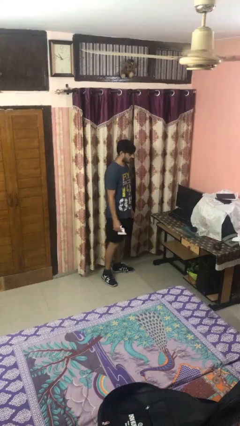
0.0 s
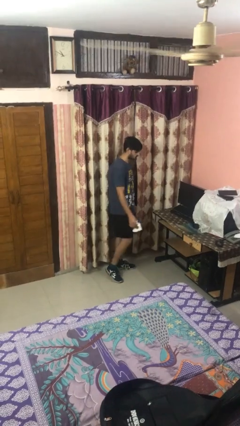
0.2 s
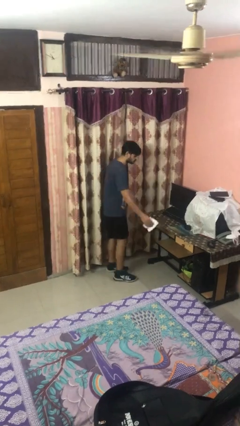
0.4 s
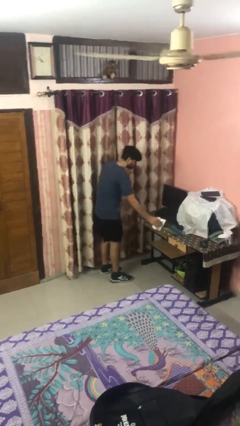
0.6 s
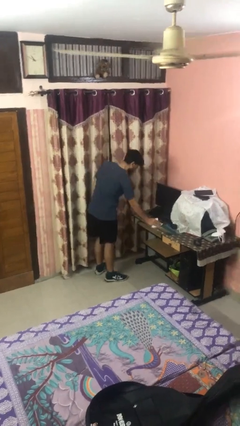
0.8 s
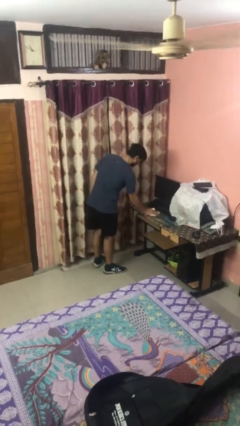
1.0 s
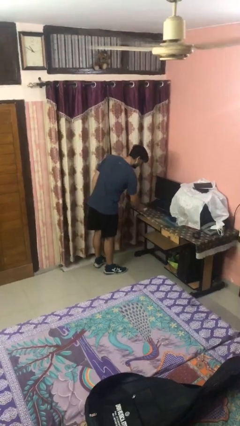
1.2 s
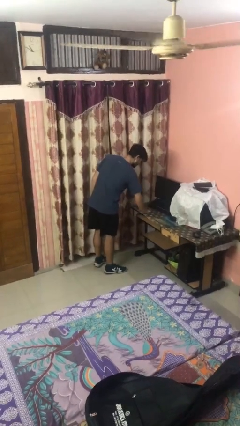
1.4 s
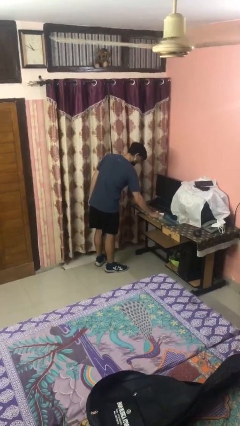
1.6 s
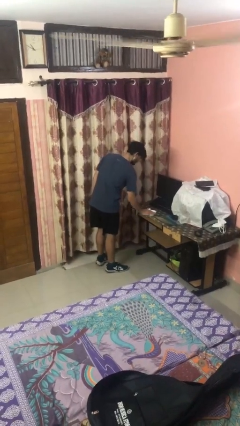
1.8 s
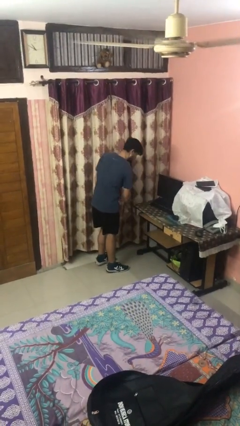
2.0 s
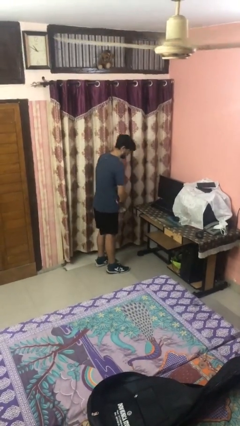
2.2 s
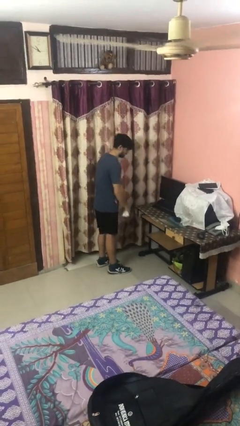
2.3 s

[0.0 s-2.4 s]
person cleans table with rag

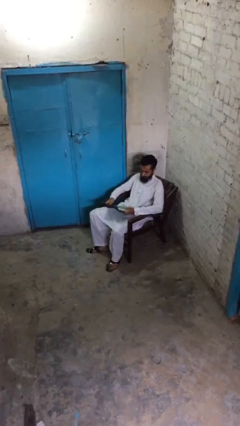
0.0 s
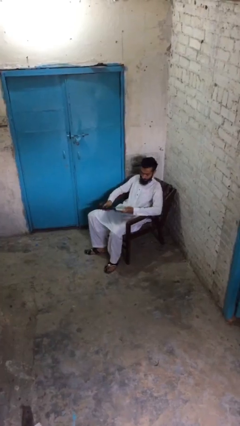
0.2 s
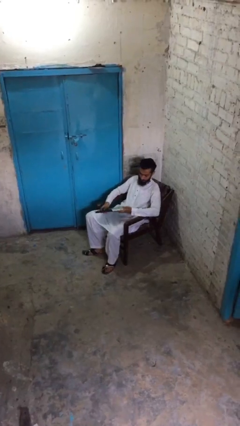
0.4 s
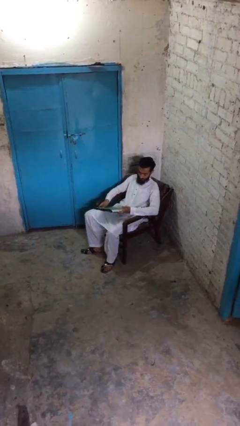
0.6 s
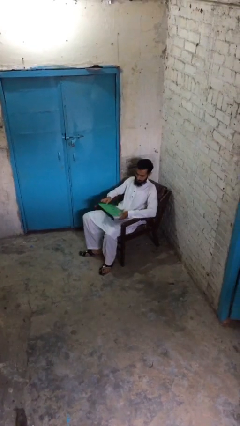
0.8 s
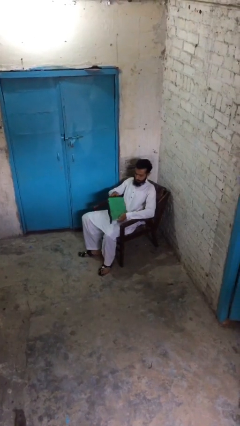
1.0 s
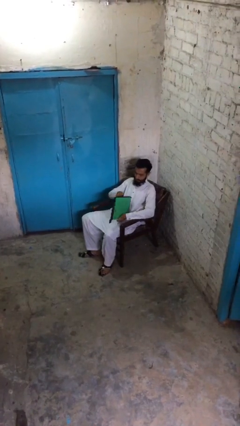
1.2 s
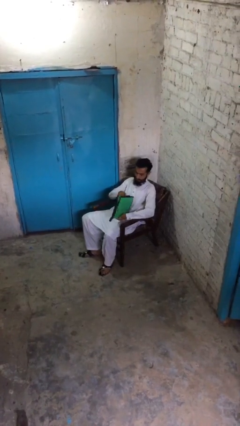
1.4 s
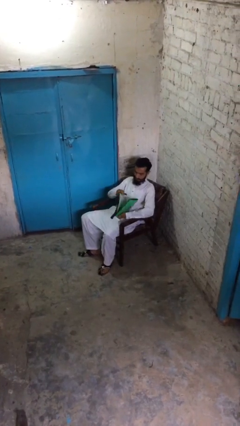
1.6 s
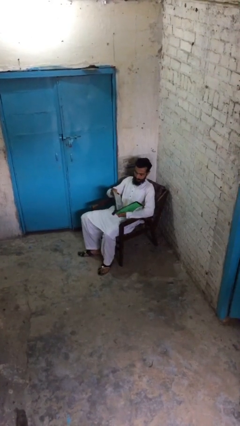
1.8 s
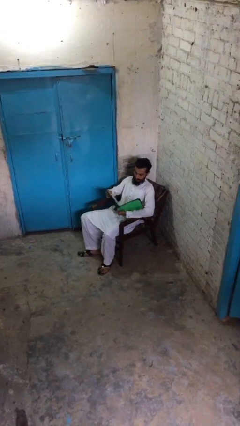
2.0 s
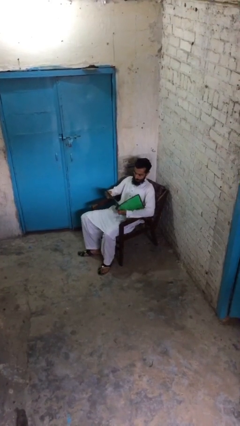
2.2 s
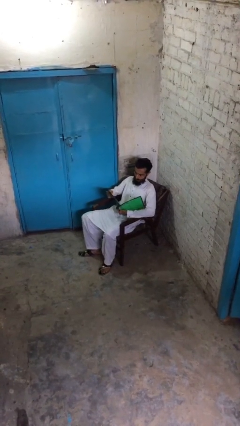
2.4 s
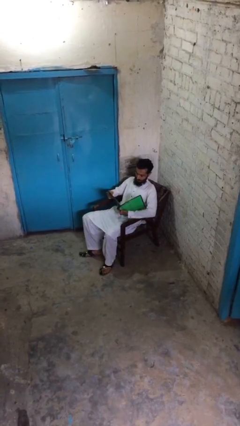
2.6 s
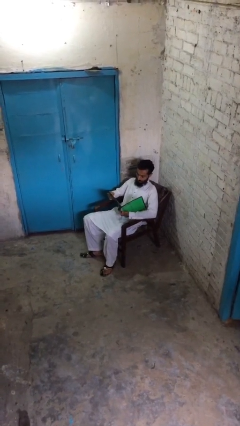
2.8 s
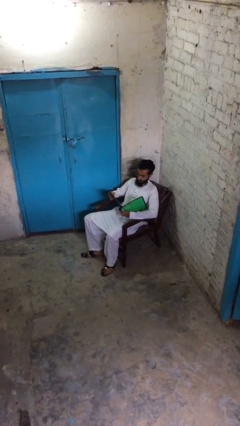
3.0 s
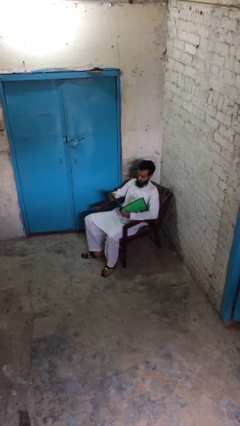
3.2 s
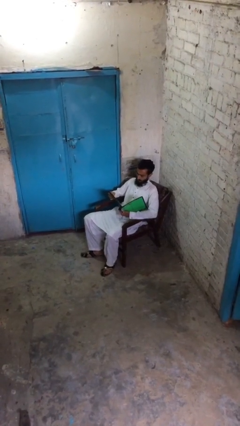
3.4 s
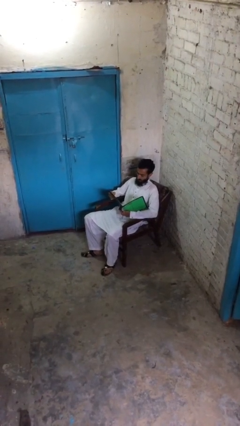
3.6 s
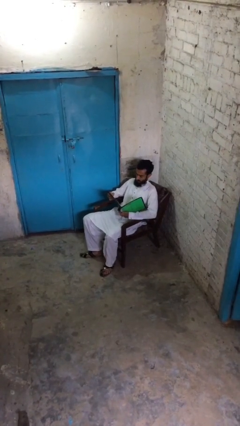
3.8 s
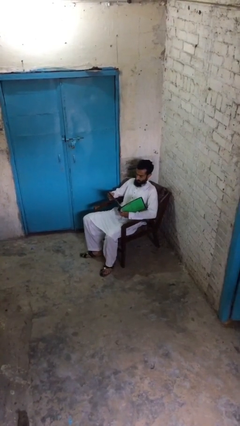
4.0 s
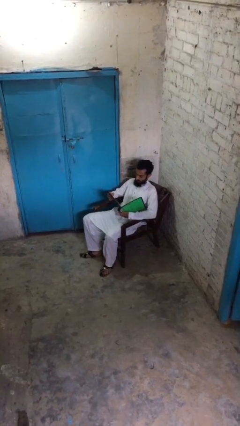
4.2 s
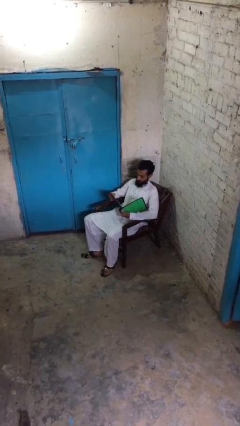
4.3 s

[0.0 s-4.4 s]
person reads document

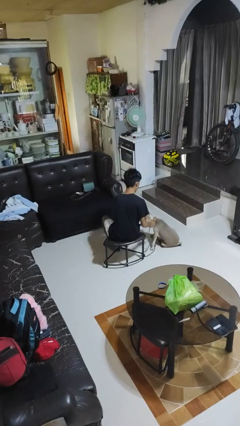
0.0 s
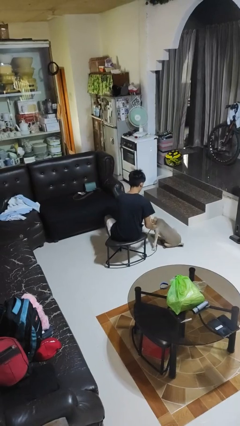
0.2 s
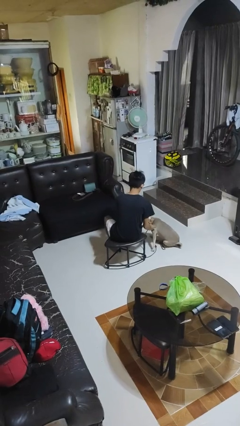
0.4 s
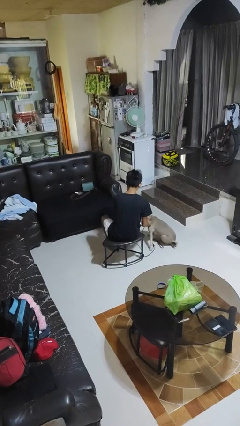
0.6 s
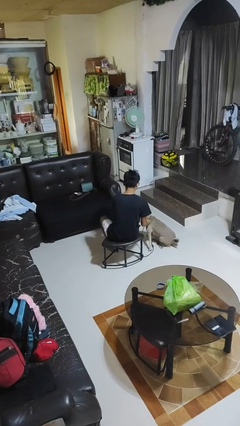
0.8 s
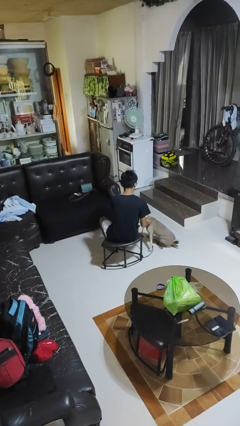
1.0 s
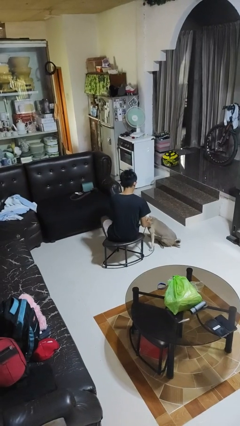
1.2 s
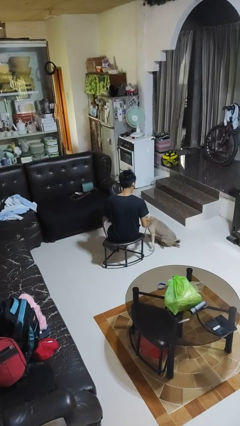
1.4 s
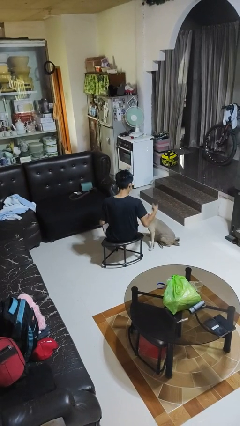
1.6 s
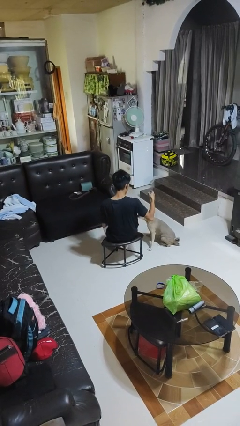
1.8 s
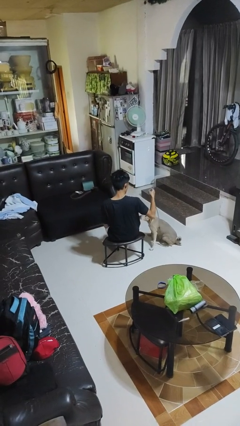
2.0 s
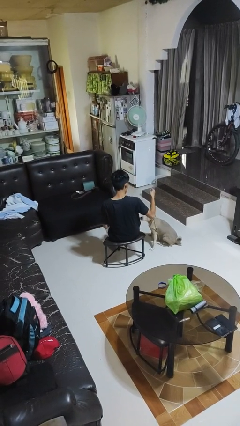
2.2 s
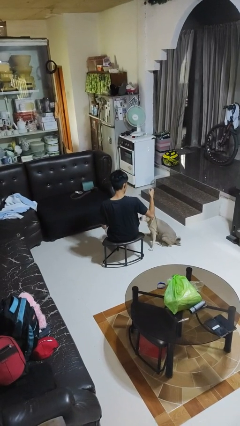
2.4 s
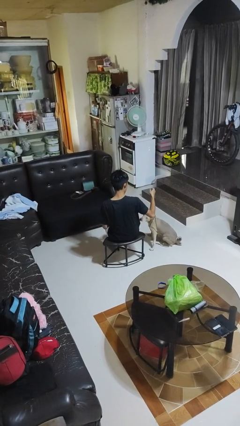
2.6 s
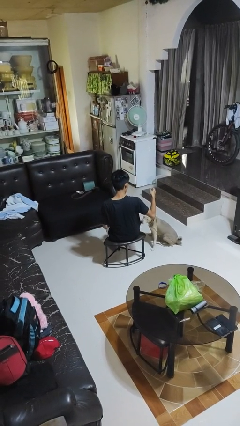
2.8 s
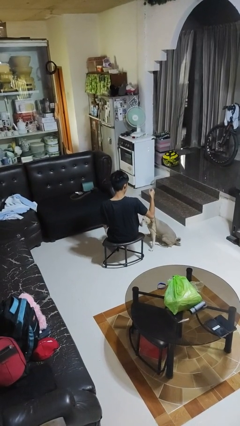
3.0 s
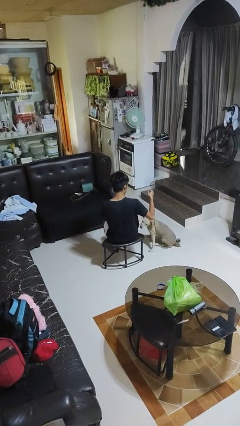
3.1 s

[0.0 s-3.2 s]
person attaches leash to dog

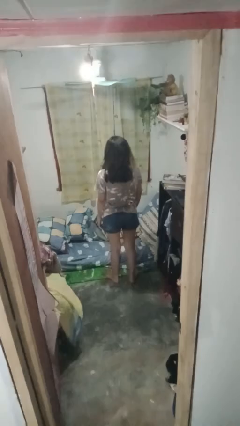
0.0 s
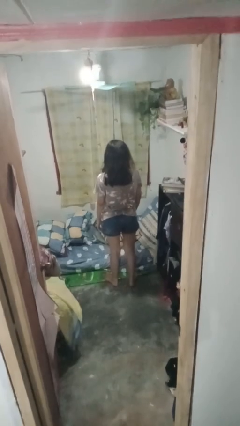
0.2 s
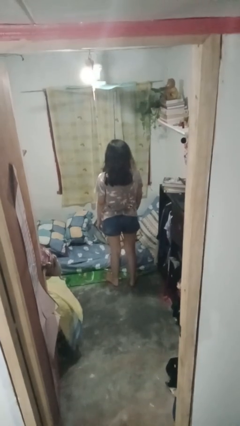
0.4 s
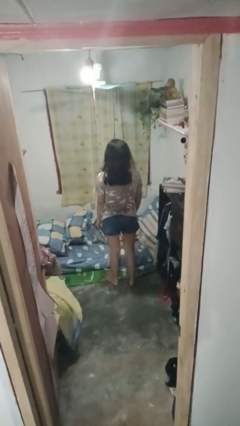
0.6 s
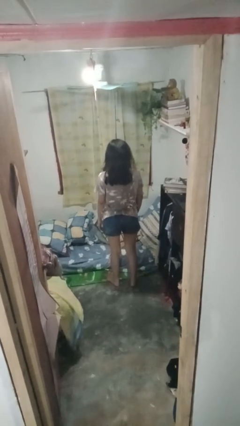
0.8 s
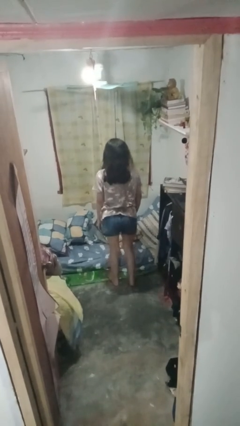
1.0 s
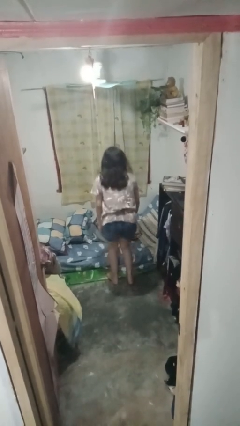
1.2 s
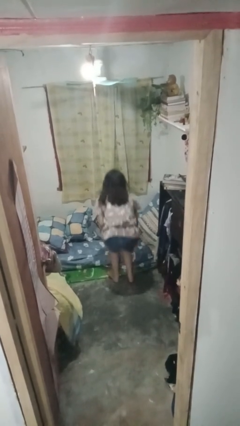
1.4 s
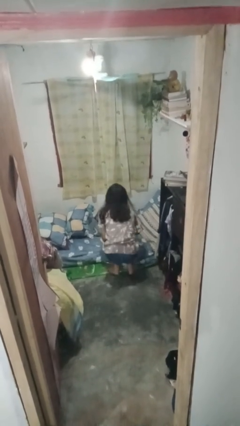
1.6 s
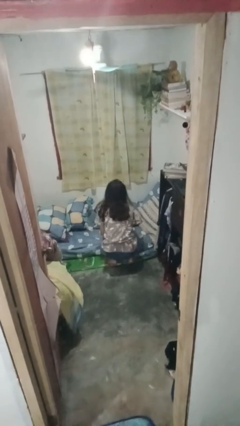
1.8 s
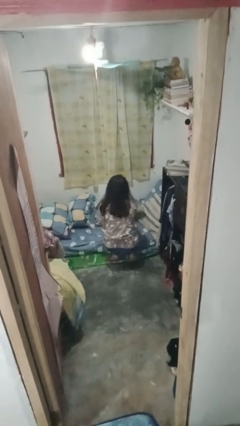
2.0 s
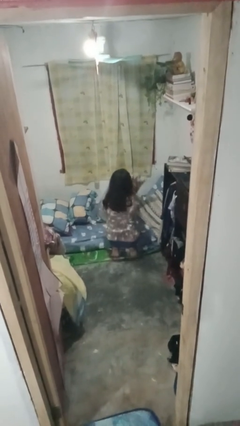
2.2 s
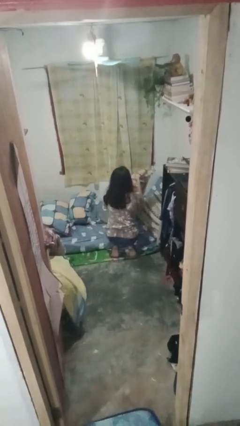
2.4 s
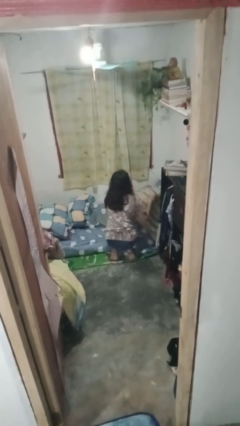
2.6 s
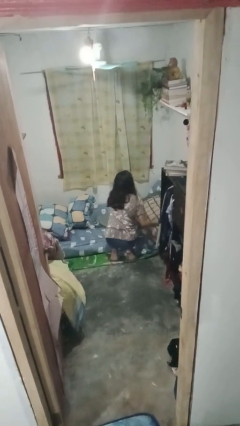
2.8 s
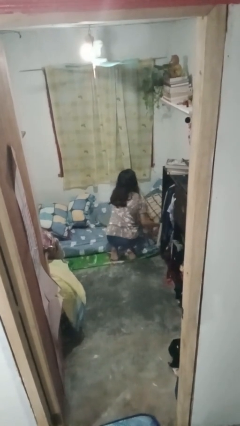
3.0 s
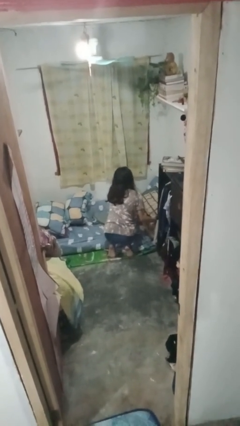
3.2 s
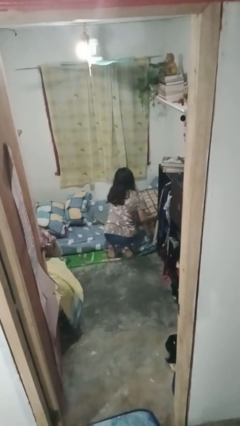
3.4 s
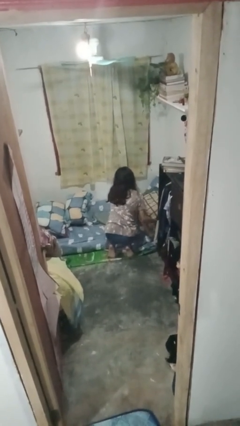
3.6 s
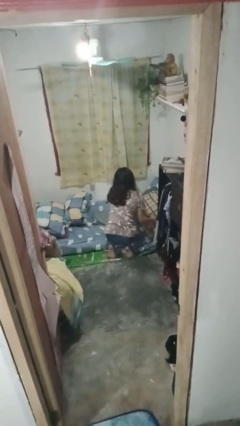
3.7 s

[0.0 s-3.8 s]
person makes bed

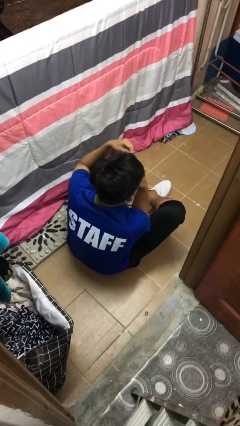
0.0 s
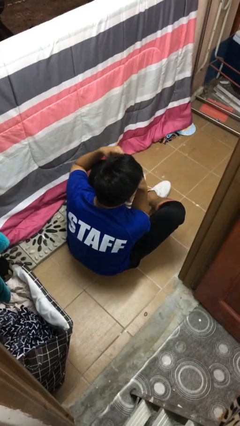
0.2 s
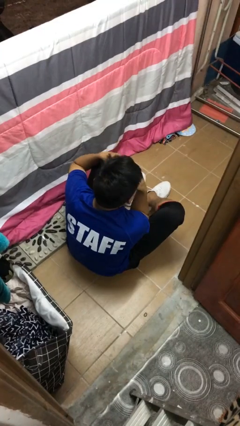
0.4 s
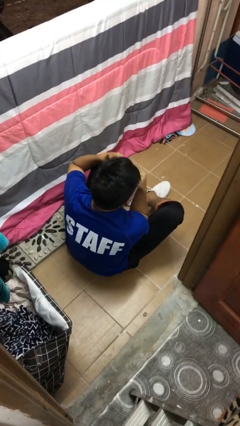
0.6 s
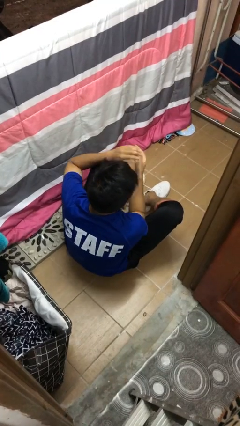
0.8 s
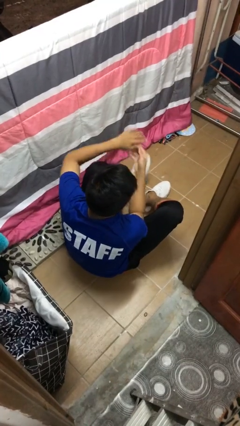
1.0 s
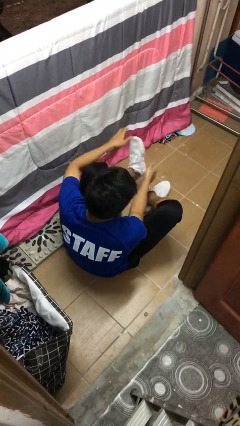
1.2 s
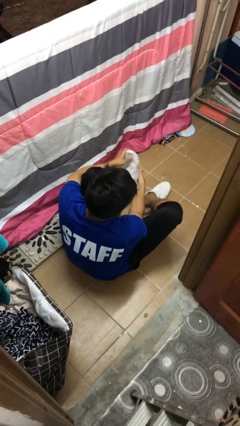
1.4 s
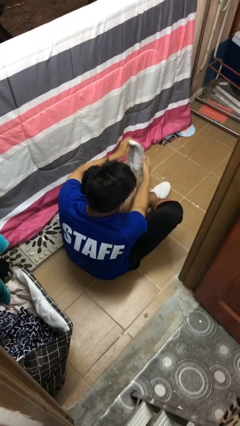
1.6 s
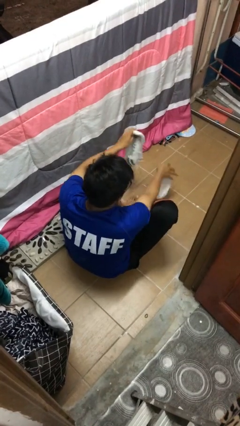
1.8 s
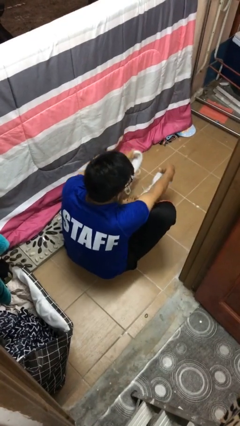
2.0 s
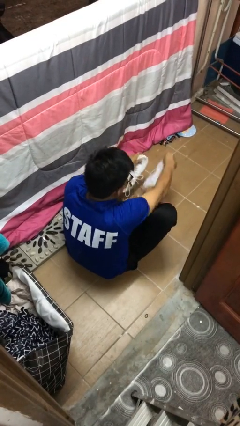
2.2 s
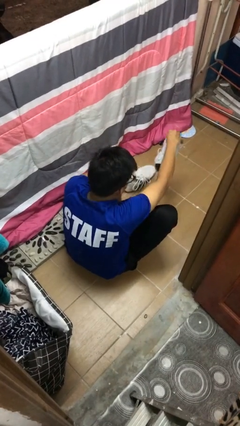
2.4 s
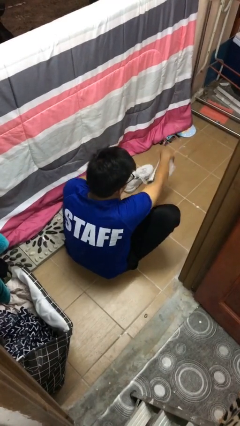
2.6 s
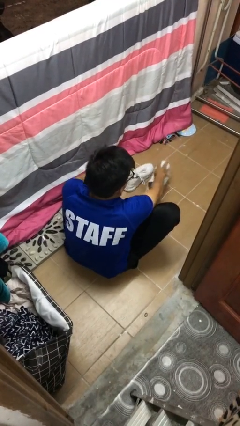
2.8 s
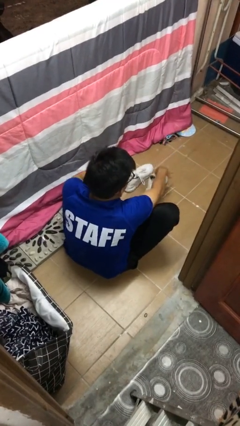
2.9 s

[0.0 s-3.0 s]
person takes off shoes

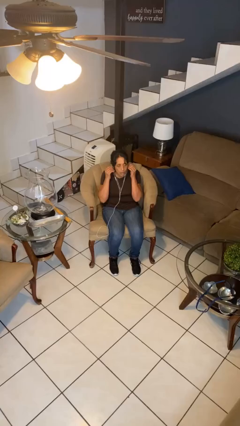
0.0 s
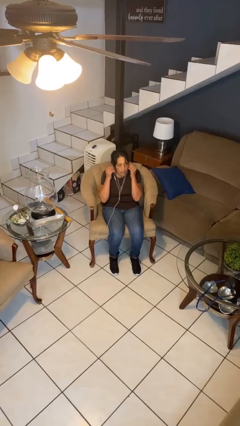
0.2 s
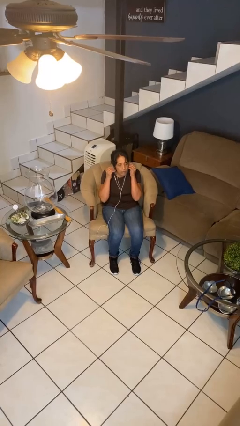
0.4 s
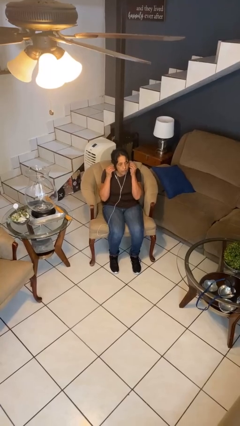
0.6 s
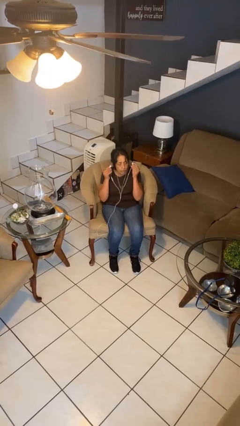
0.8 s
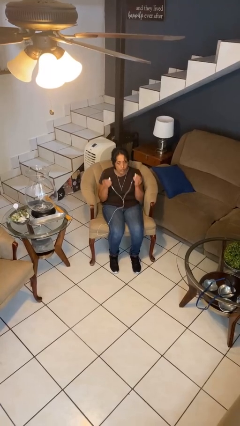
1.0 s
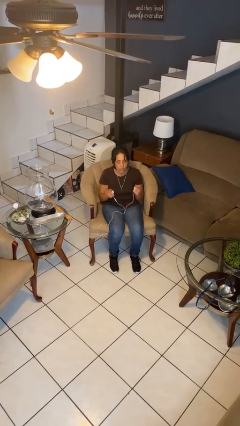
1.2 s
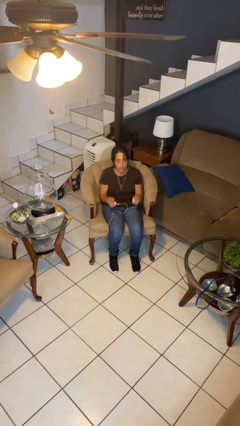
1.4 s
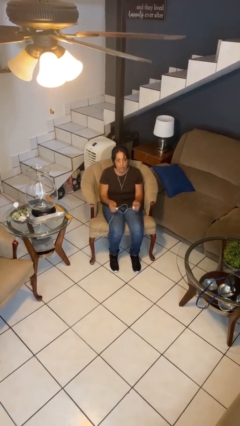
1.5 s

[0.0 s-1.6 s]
person takes off headphones
